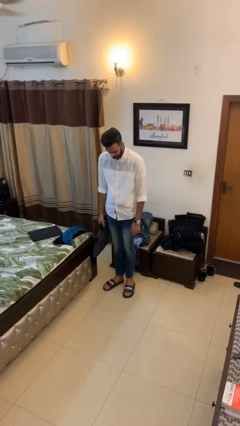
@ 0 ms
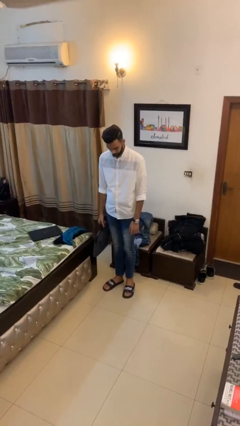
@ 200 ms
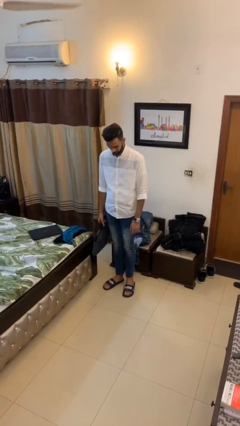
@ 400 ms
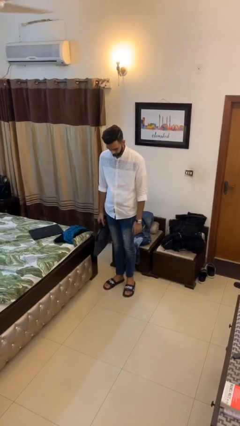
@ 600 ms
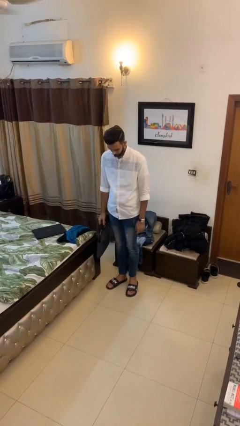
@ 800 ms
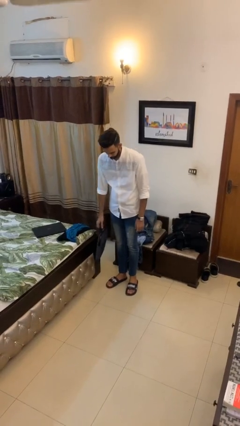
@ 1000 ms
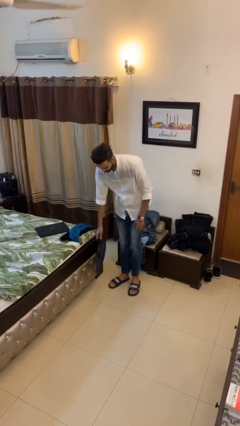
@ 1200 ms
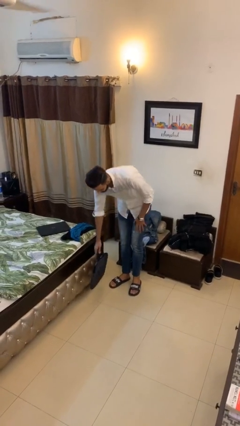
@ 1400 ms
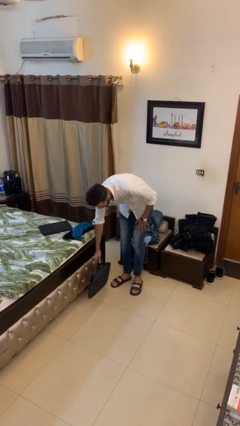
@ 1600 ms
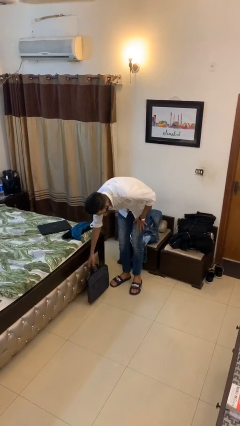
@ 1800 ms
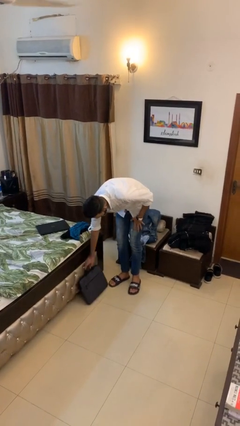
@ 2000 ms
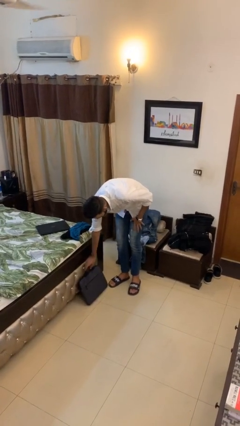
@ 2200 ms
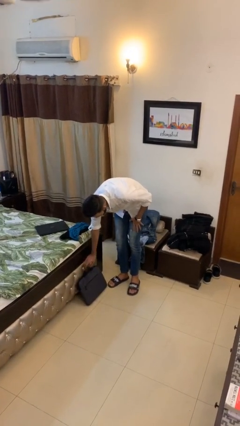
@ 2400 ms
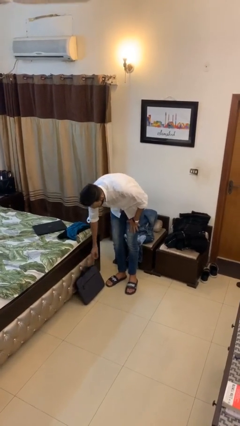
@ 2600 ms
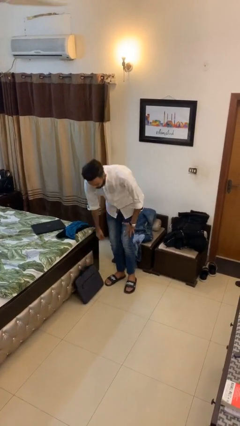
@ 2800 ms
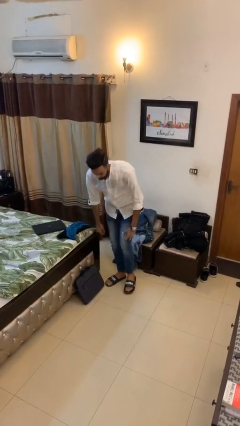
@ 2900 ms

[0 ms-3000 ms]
person puts down object on floor

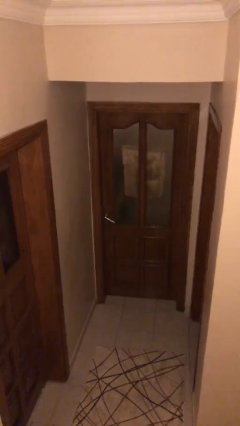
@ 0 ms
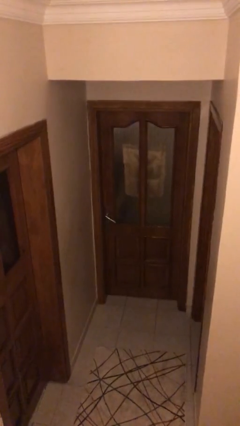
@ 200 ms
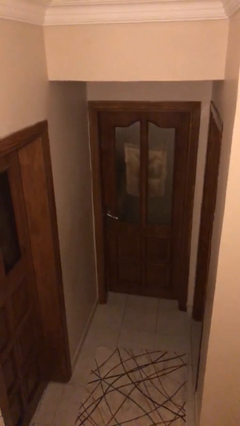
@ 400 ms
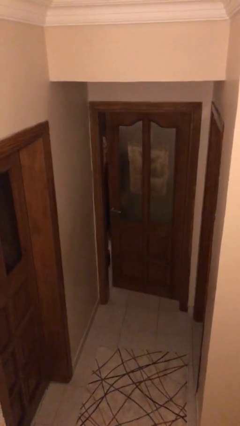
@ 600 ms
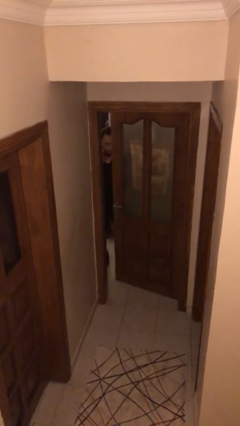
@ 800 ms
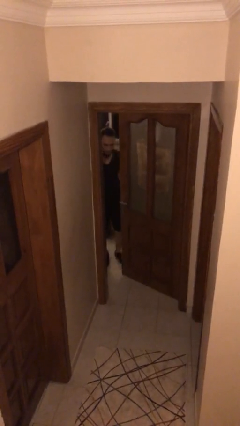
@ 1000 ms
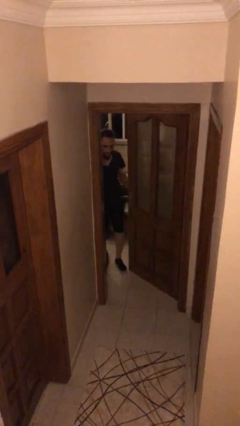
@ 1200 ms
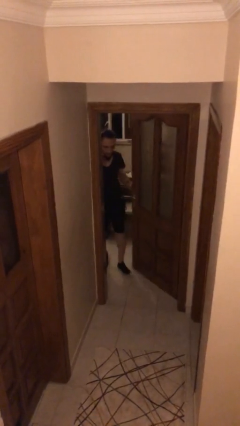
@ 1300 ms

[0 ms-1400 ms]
person opens facility door

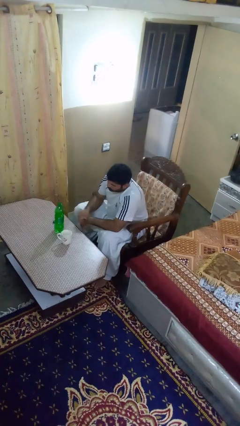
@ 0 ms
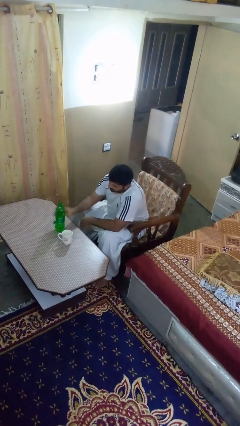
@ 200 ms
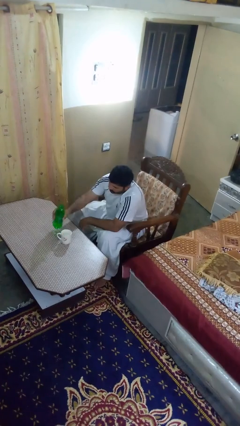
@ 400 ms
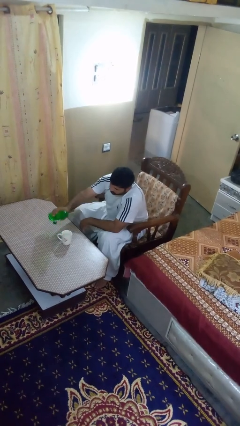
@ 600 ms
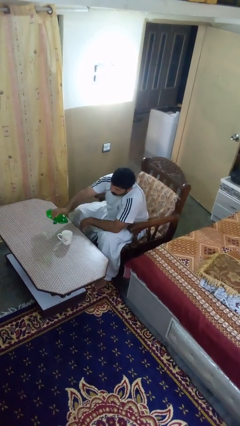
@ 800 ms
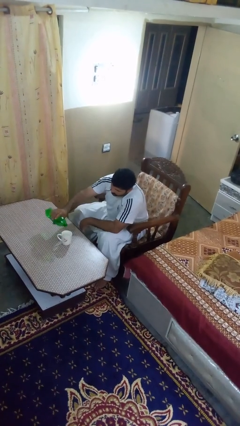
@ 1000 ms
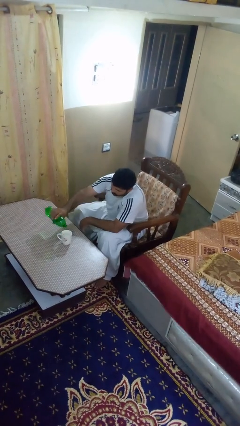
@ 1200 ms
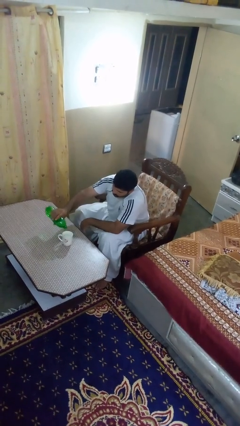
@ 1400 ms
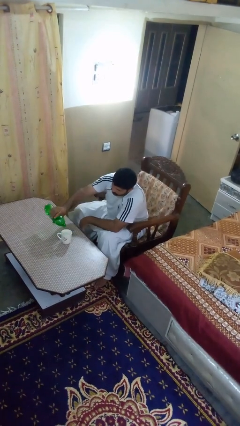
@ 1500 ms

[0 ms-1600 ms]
person pours liquid into cup

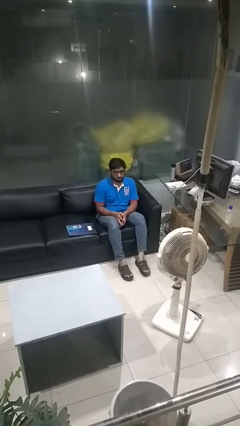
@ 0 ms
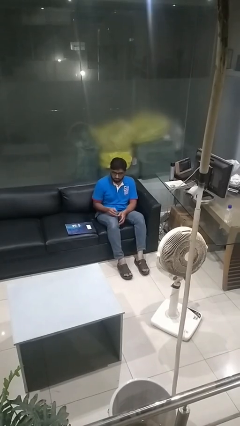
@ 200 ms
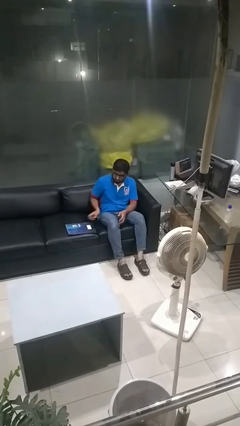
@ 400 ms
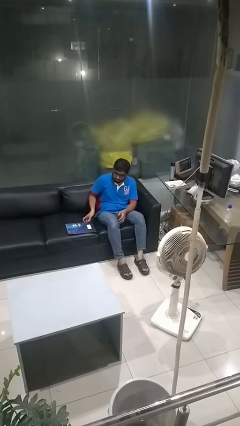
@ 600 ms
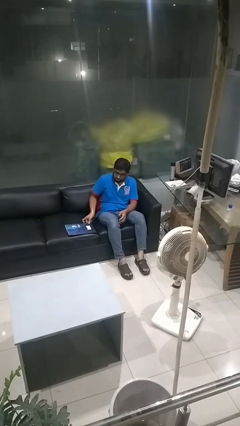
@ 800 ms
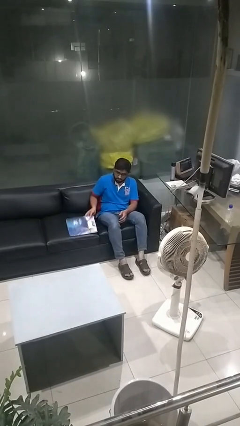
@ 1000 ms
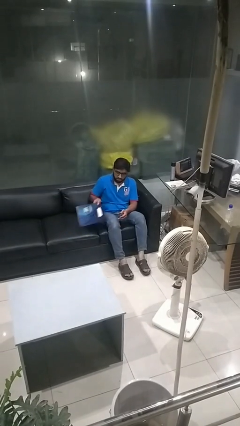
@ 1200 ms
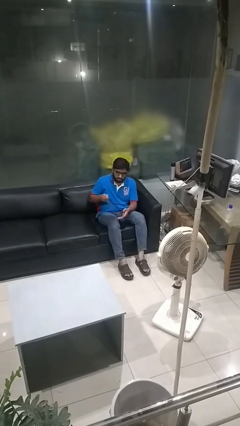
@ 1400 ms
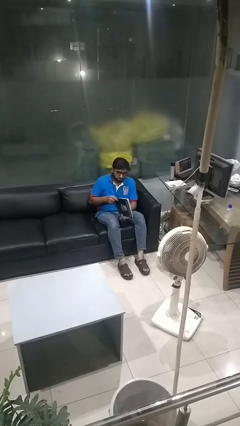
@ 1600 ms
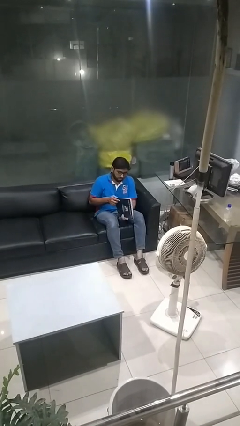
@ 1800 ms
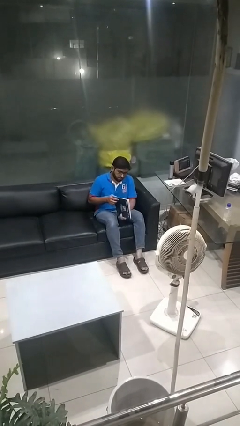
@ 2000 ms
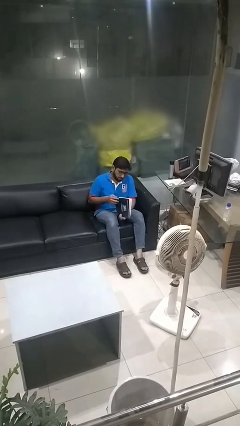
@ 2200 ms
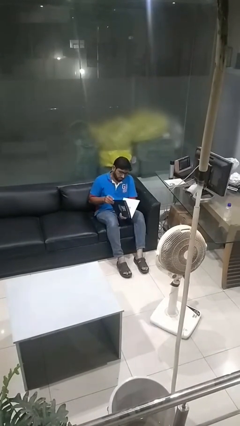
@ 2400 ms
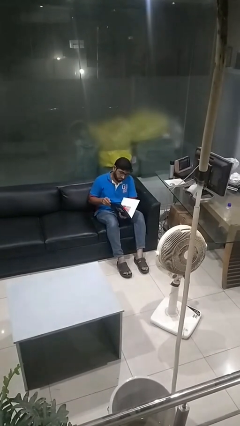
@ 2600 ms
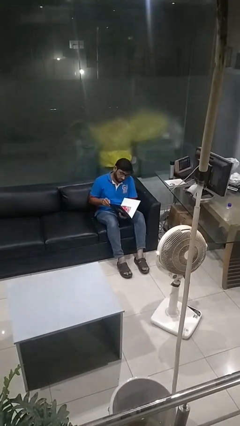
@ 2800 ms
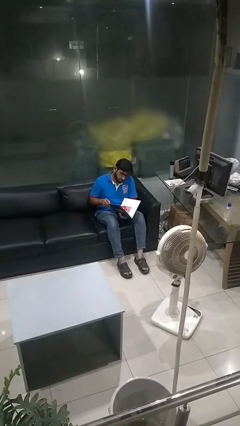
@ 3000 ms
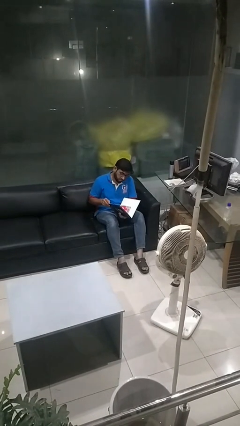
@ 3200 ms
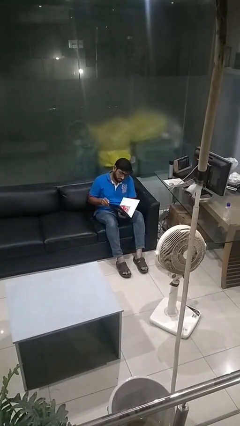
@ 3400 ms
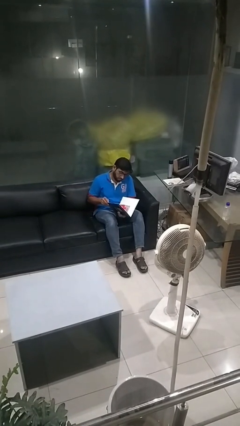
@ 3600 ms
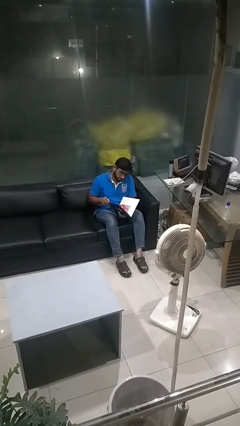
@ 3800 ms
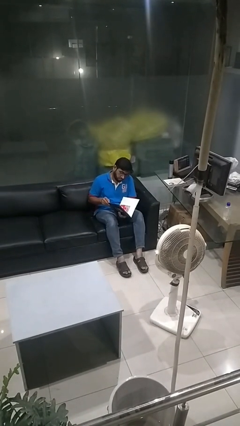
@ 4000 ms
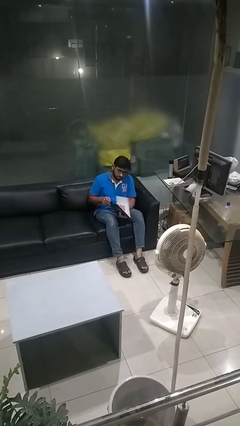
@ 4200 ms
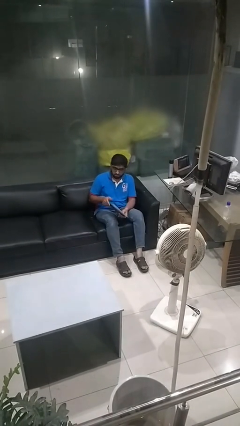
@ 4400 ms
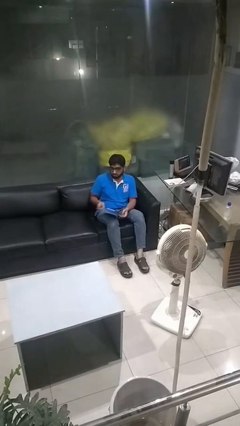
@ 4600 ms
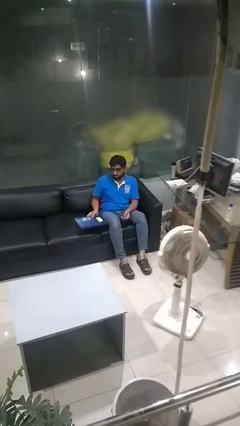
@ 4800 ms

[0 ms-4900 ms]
person reads magazine

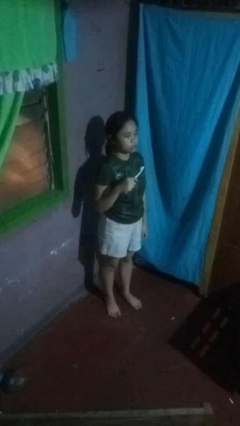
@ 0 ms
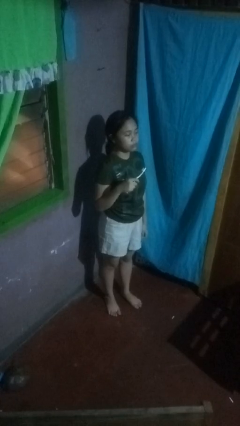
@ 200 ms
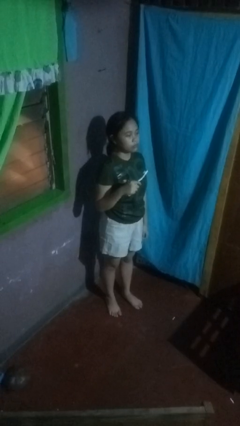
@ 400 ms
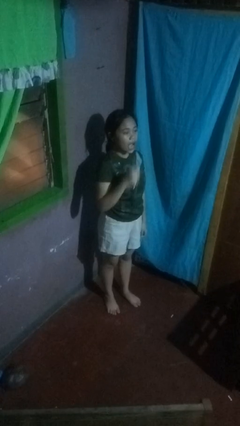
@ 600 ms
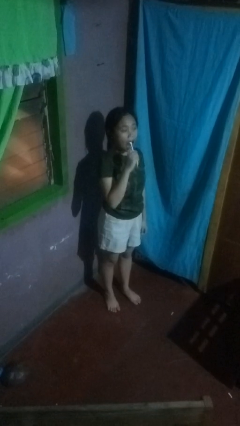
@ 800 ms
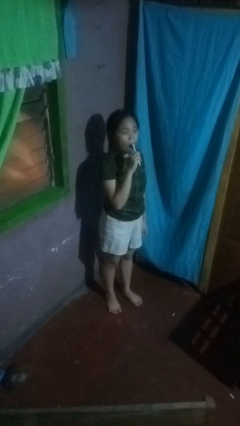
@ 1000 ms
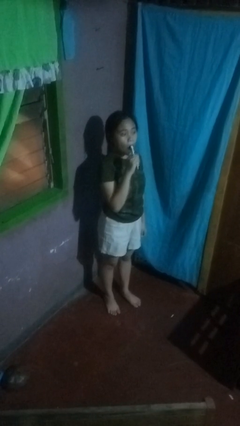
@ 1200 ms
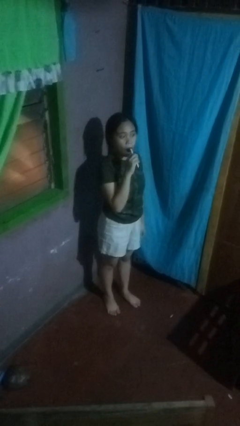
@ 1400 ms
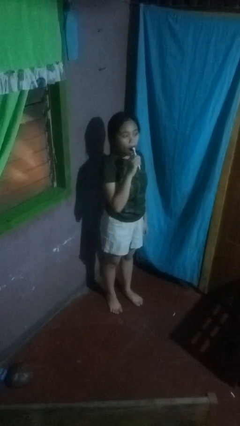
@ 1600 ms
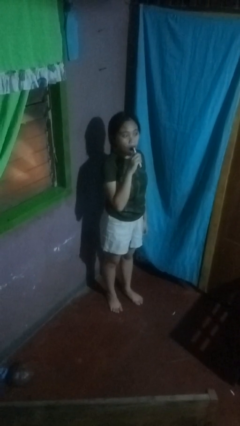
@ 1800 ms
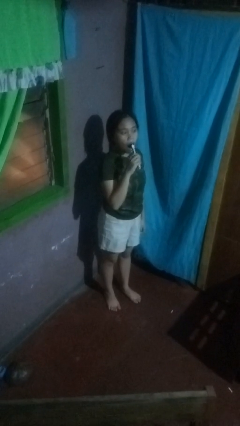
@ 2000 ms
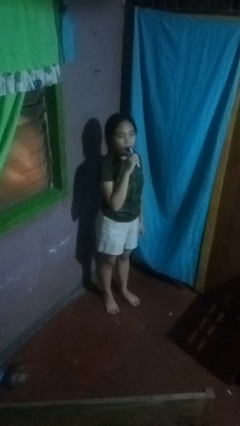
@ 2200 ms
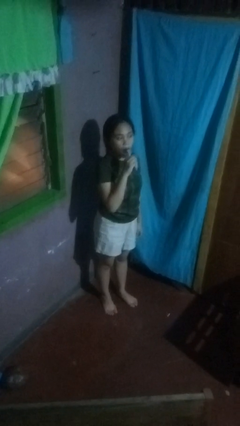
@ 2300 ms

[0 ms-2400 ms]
person brushes teeth

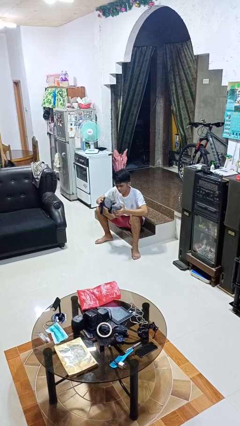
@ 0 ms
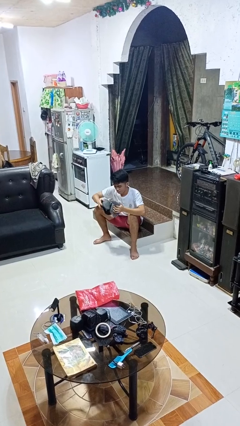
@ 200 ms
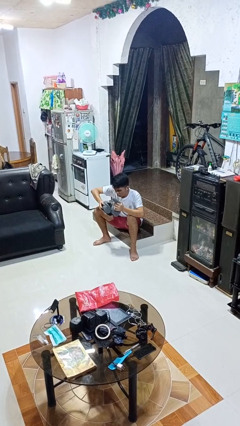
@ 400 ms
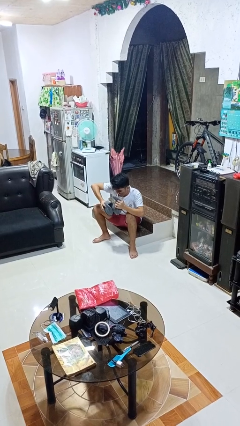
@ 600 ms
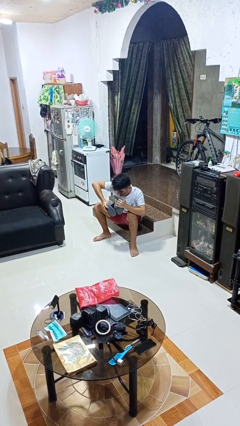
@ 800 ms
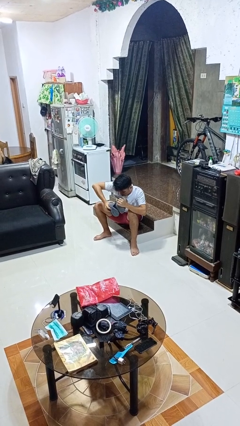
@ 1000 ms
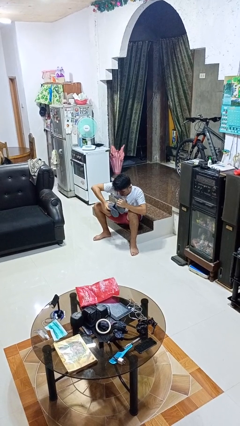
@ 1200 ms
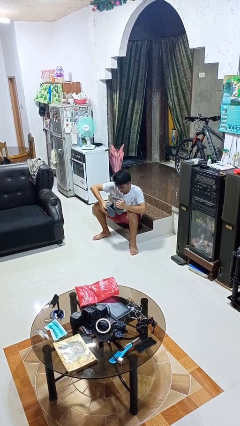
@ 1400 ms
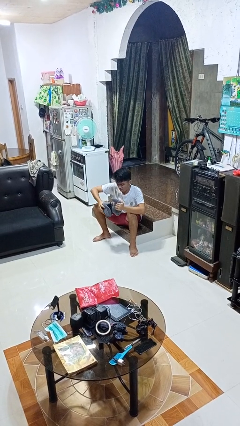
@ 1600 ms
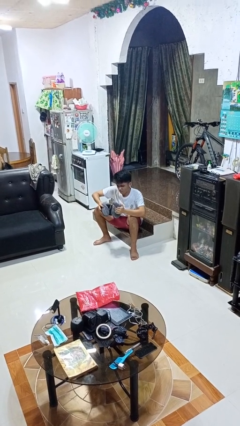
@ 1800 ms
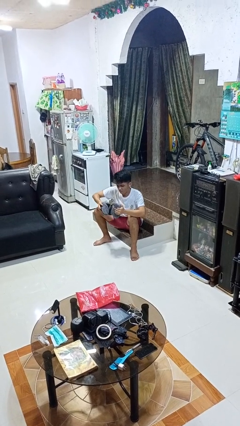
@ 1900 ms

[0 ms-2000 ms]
person squeezes object

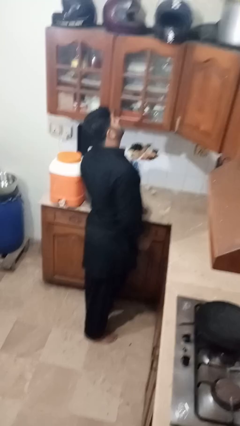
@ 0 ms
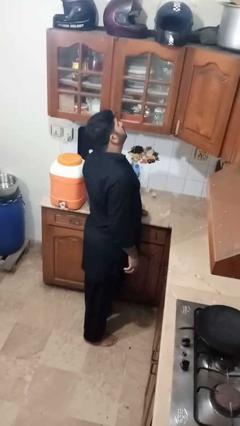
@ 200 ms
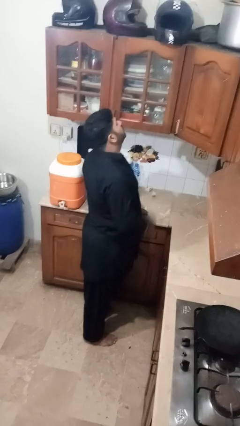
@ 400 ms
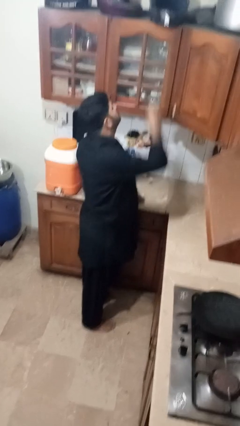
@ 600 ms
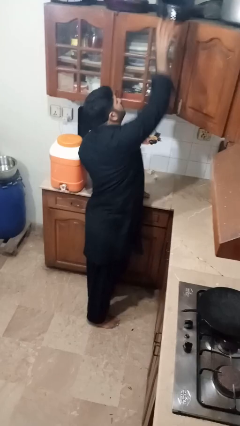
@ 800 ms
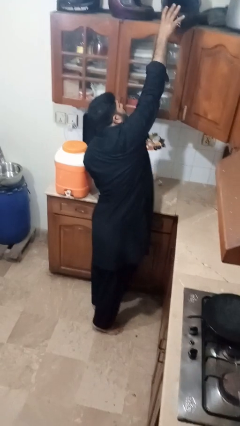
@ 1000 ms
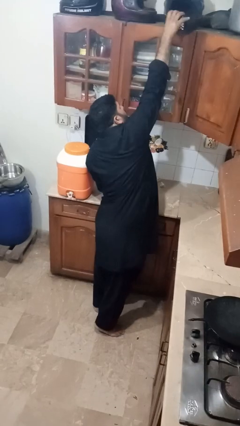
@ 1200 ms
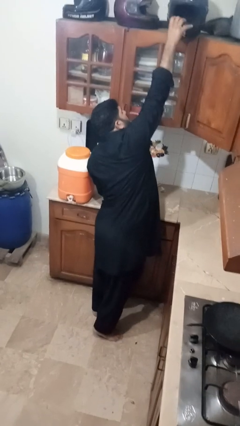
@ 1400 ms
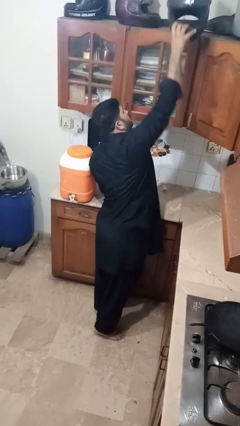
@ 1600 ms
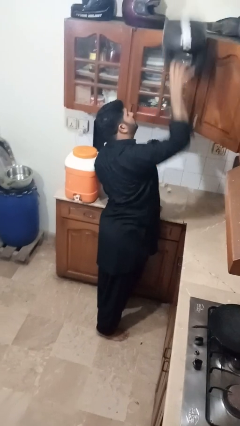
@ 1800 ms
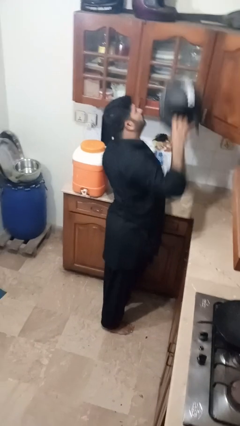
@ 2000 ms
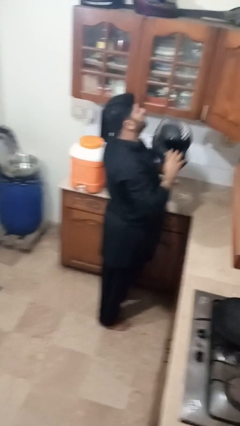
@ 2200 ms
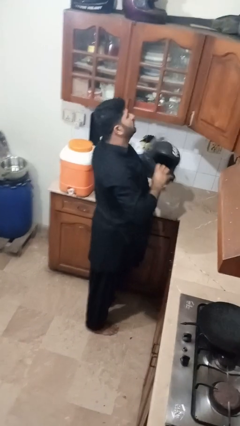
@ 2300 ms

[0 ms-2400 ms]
person picks up object from shelf
